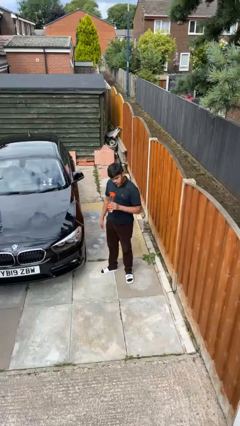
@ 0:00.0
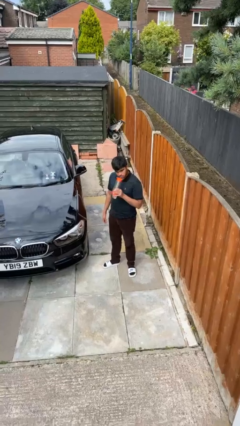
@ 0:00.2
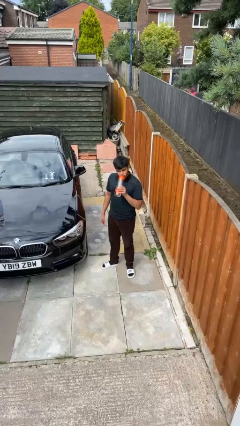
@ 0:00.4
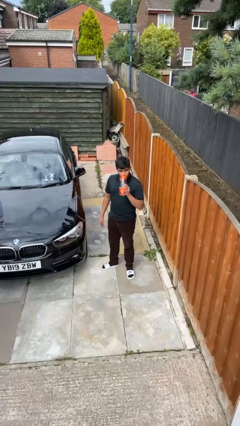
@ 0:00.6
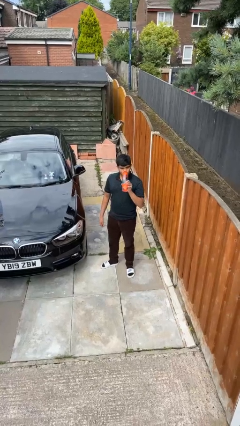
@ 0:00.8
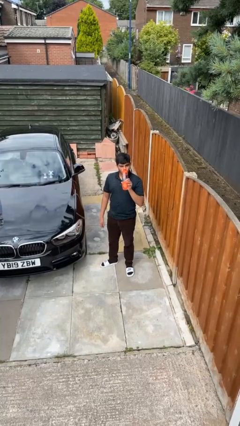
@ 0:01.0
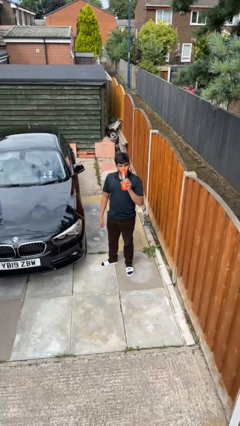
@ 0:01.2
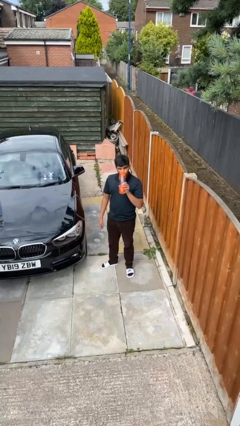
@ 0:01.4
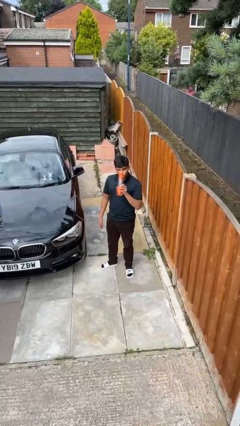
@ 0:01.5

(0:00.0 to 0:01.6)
person drinks from bottle

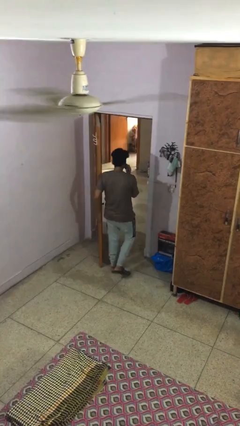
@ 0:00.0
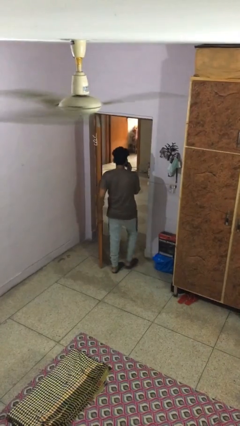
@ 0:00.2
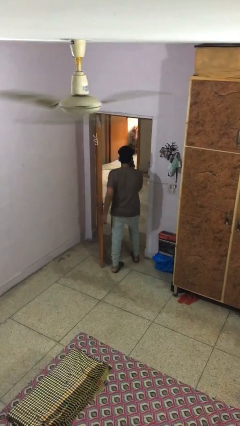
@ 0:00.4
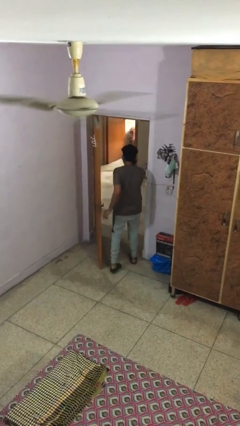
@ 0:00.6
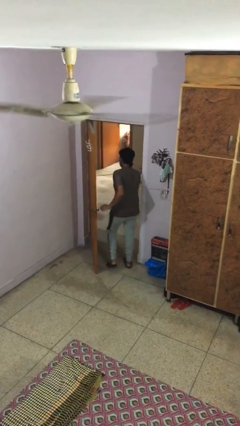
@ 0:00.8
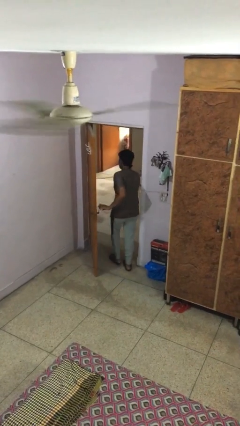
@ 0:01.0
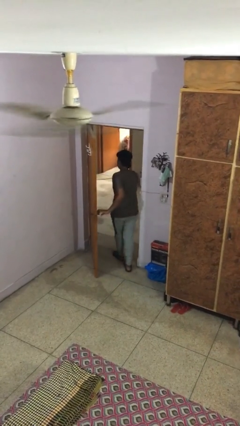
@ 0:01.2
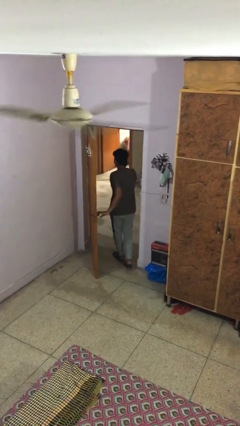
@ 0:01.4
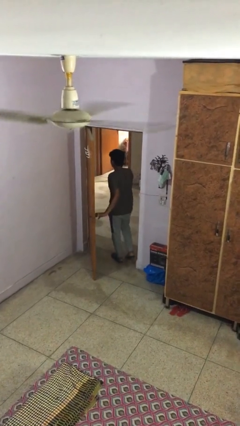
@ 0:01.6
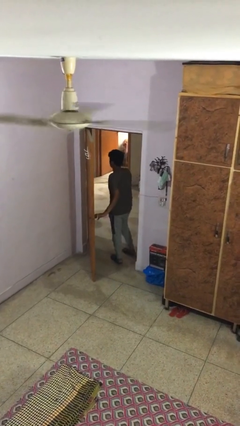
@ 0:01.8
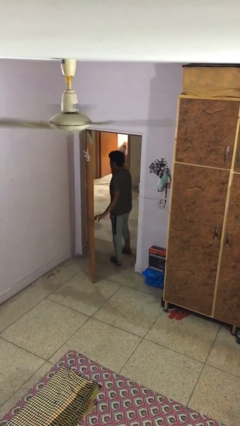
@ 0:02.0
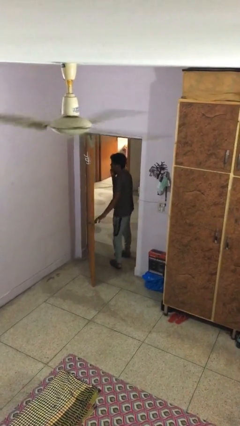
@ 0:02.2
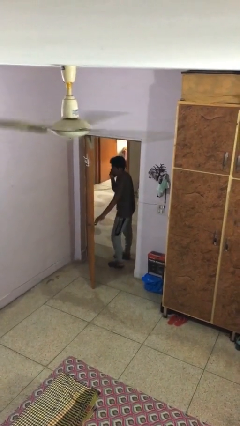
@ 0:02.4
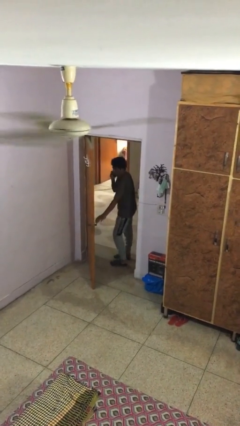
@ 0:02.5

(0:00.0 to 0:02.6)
person exits scene through structure

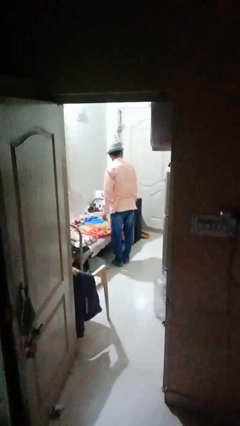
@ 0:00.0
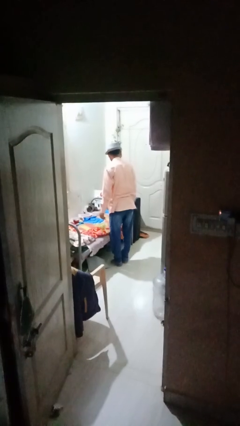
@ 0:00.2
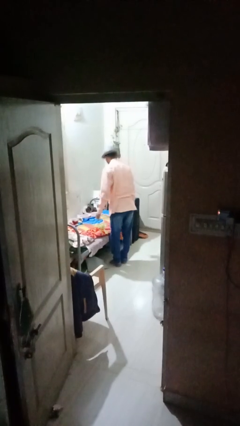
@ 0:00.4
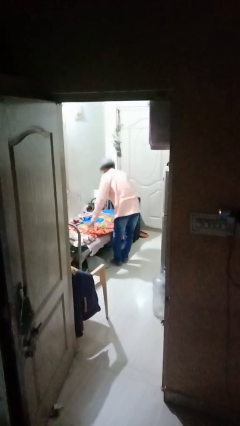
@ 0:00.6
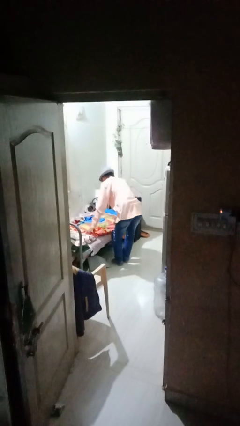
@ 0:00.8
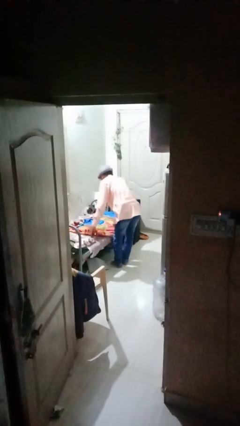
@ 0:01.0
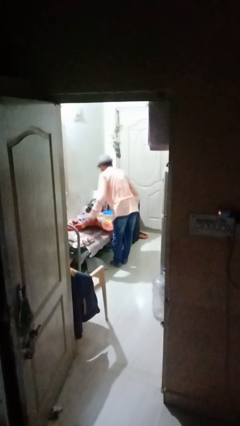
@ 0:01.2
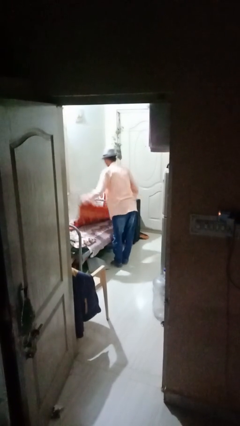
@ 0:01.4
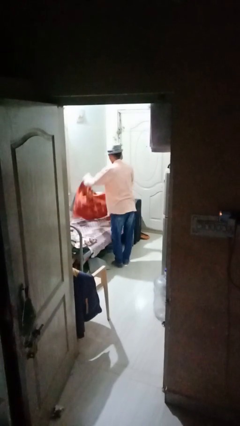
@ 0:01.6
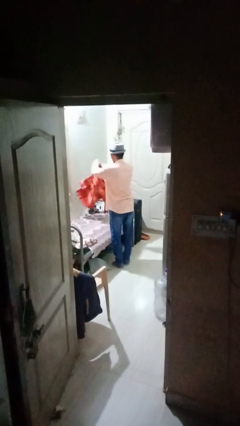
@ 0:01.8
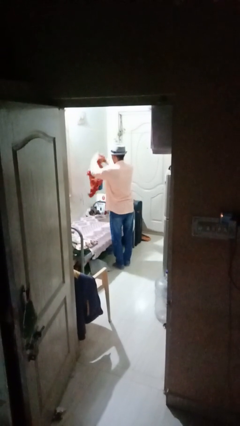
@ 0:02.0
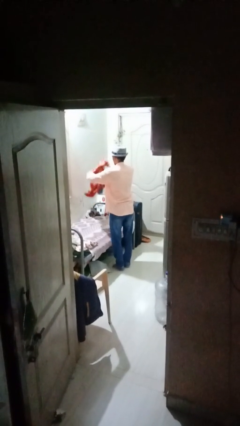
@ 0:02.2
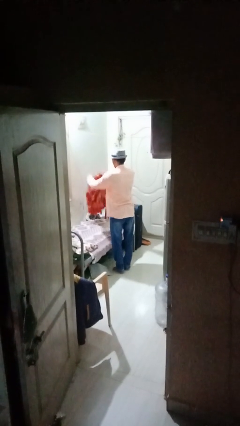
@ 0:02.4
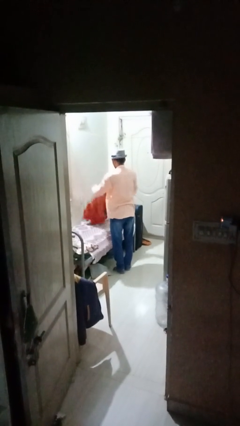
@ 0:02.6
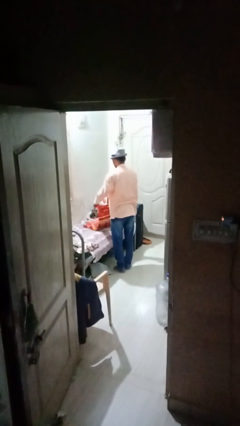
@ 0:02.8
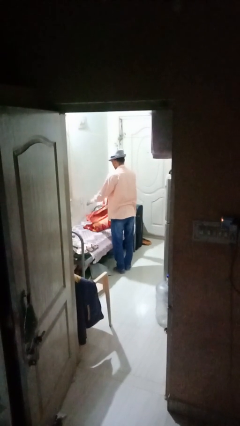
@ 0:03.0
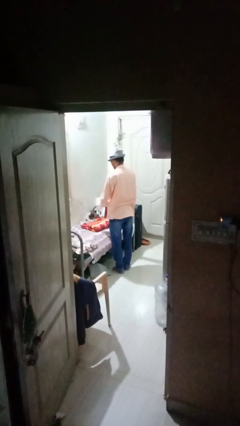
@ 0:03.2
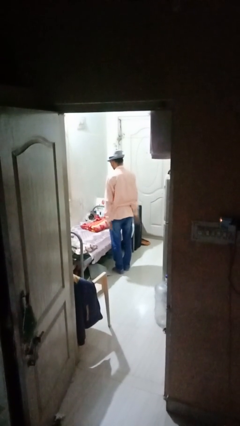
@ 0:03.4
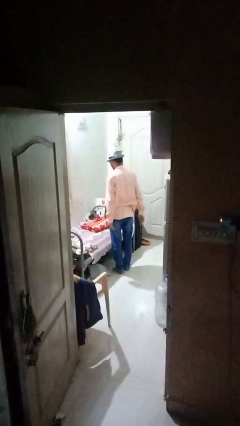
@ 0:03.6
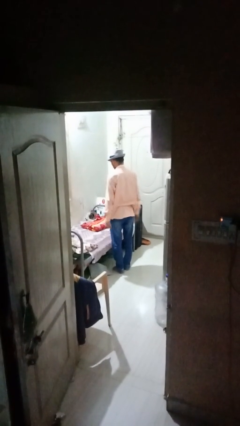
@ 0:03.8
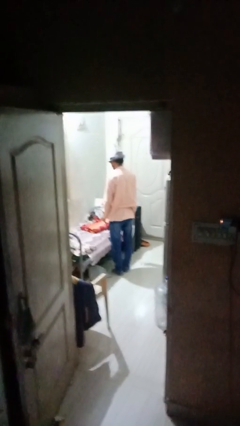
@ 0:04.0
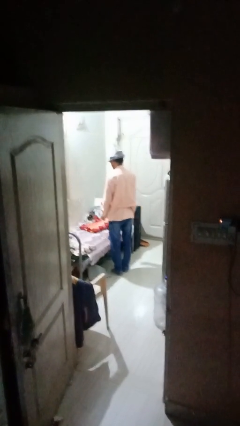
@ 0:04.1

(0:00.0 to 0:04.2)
person folds blanket

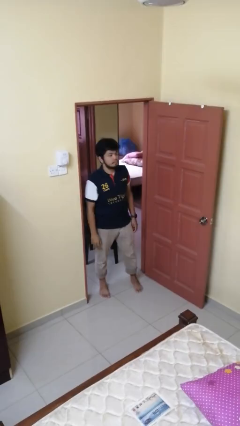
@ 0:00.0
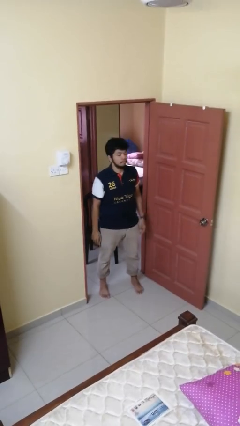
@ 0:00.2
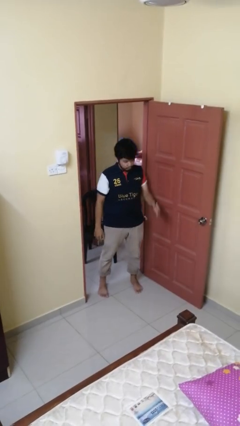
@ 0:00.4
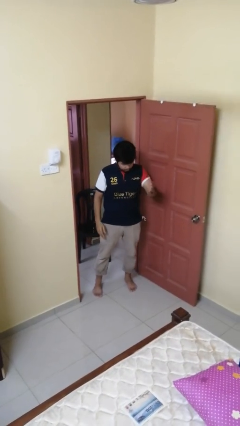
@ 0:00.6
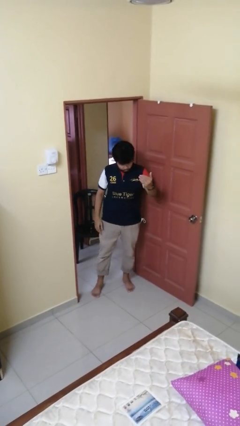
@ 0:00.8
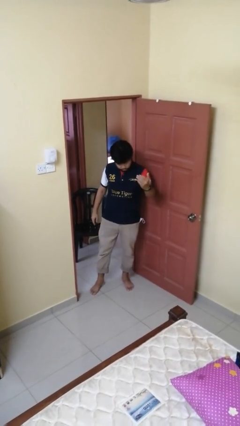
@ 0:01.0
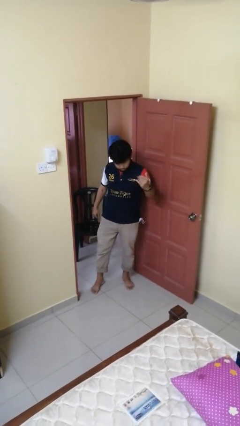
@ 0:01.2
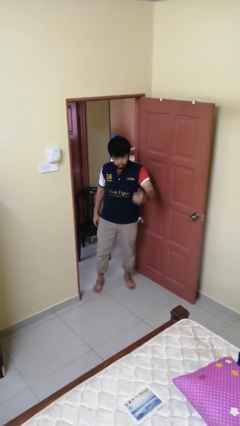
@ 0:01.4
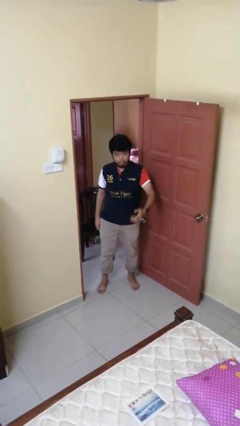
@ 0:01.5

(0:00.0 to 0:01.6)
person gestures come here

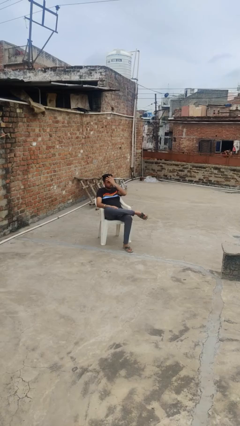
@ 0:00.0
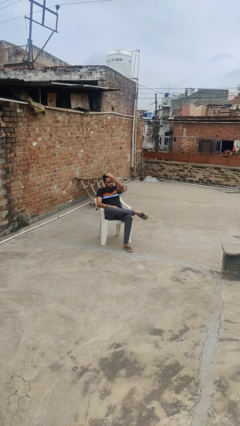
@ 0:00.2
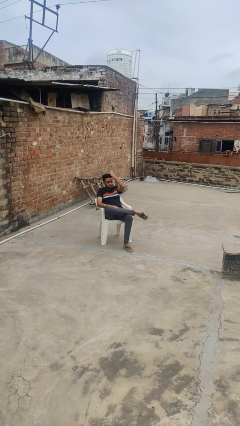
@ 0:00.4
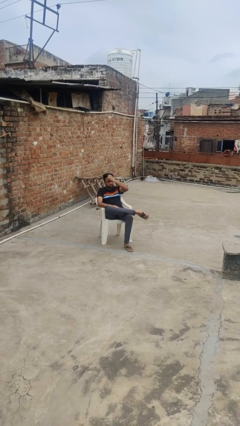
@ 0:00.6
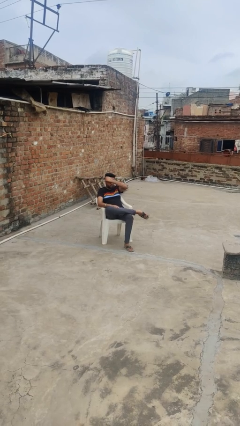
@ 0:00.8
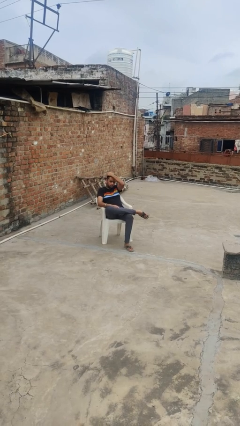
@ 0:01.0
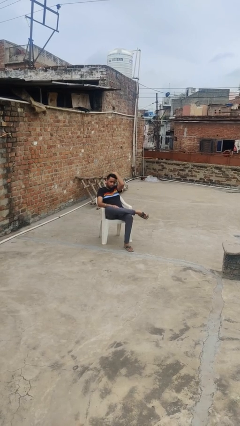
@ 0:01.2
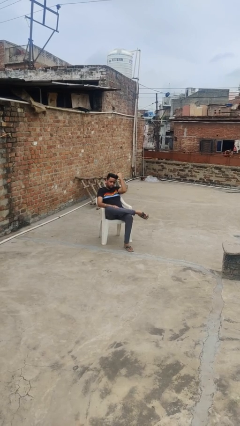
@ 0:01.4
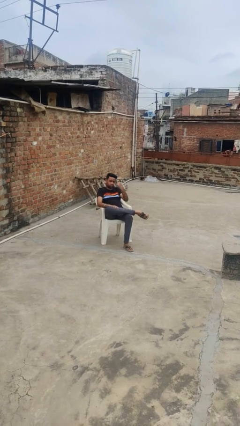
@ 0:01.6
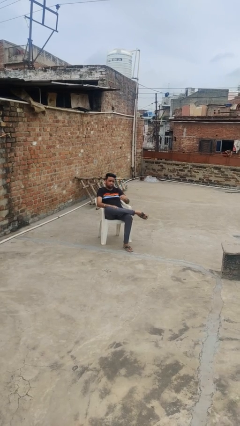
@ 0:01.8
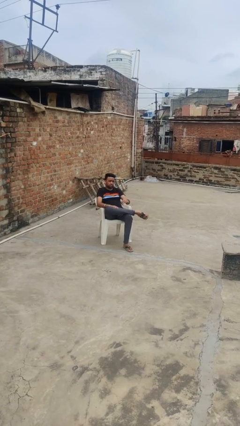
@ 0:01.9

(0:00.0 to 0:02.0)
person strokes hair

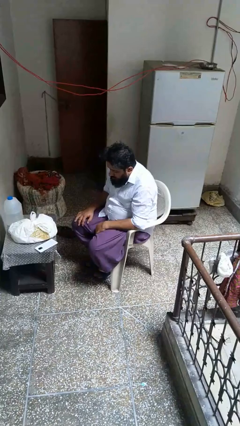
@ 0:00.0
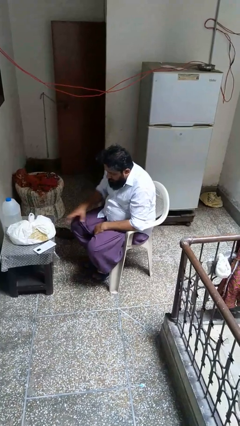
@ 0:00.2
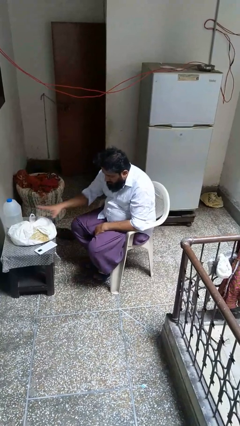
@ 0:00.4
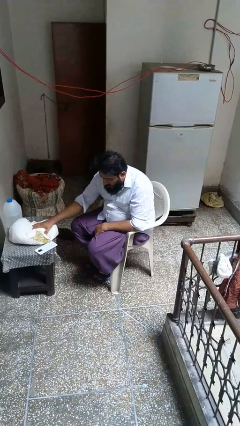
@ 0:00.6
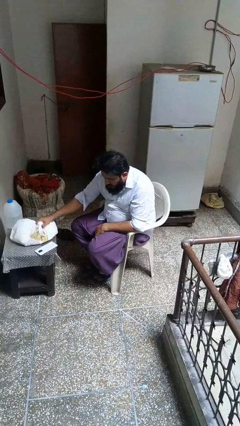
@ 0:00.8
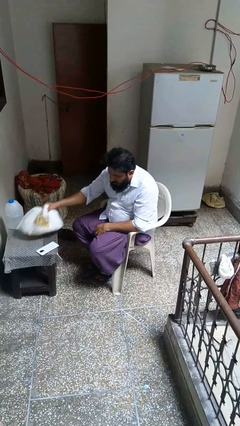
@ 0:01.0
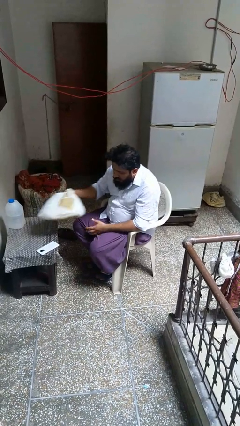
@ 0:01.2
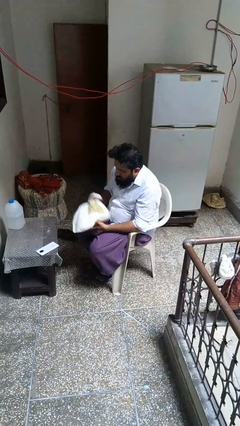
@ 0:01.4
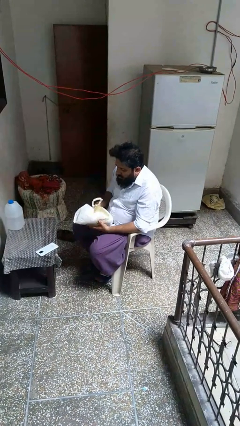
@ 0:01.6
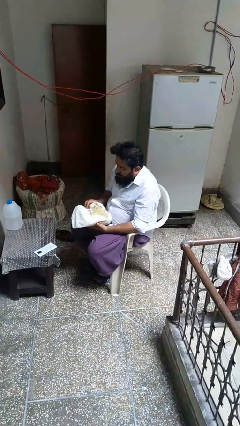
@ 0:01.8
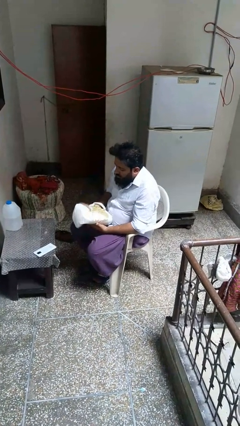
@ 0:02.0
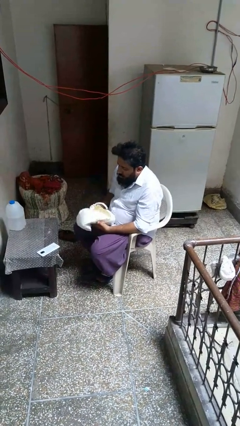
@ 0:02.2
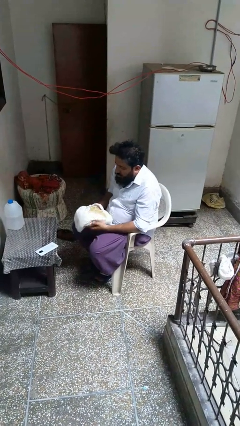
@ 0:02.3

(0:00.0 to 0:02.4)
person picks up object from table

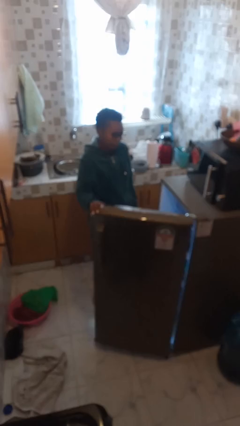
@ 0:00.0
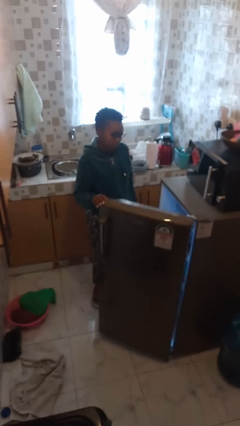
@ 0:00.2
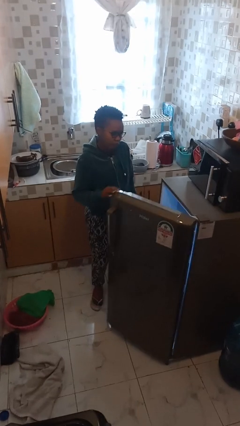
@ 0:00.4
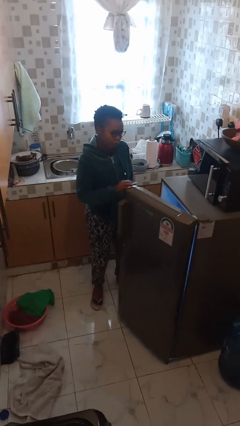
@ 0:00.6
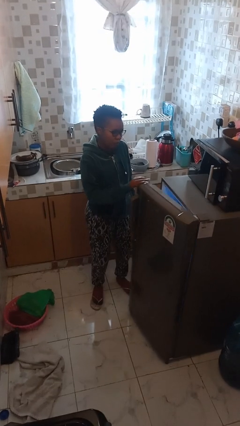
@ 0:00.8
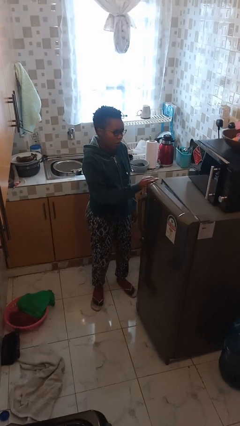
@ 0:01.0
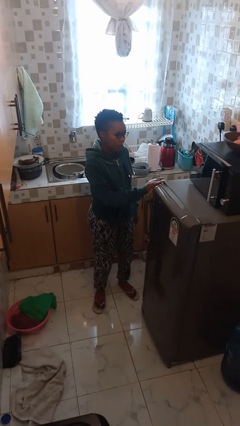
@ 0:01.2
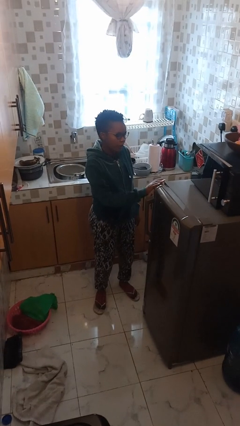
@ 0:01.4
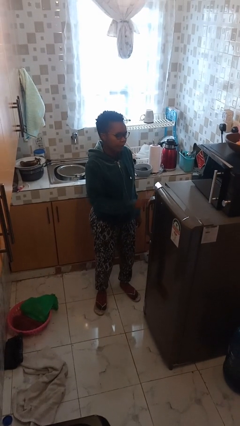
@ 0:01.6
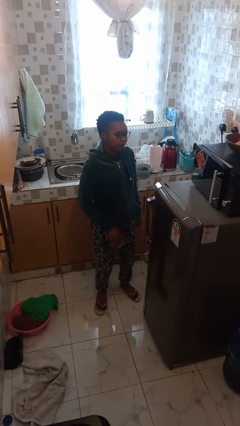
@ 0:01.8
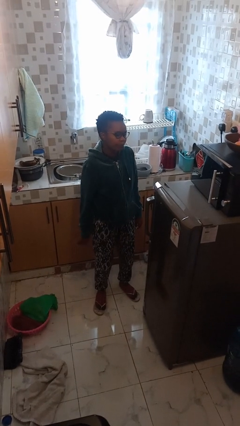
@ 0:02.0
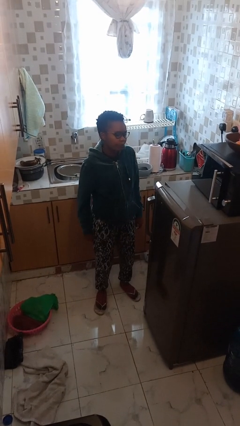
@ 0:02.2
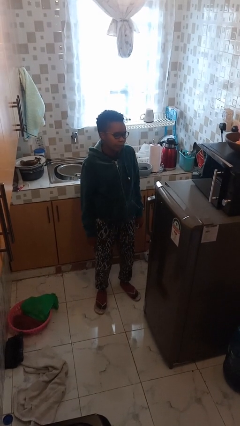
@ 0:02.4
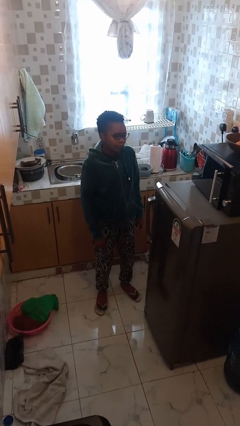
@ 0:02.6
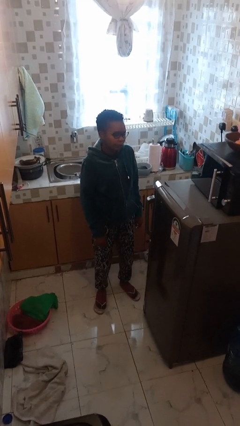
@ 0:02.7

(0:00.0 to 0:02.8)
person closes refrigerator

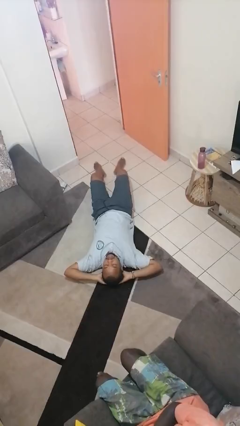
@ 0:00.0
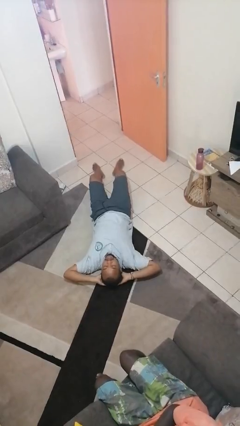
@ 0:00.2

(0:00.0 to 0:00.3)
person exercises with lunges
